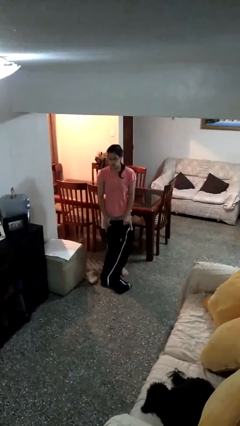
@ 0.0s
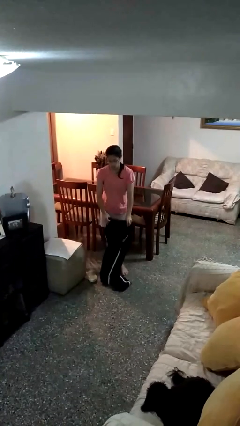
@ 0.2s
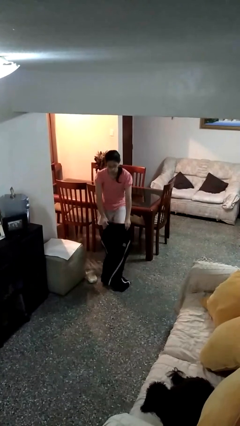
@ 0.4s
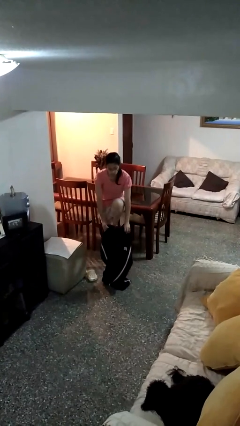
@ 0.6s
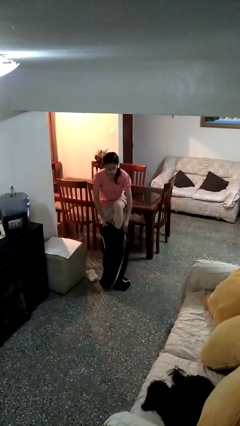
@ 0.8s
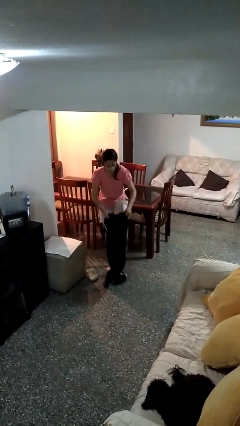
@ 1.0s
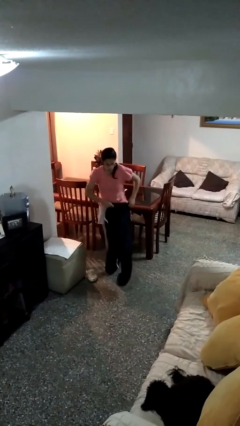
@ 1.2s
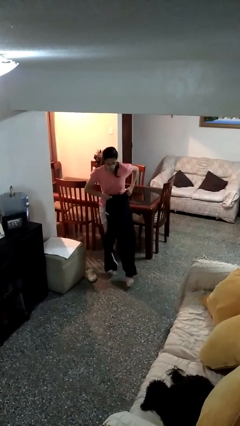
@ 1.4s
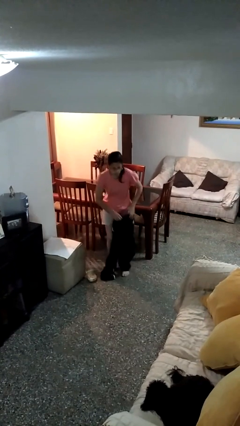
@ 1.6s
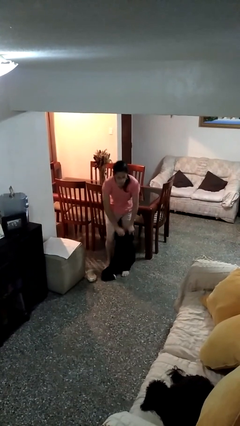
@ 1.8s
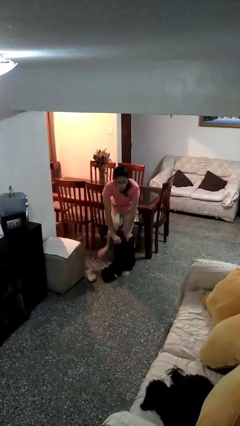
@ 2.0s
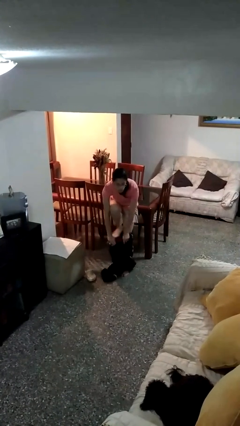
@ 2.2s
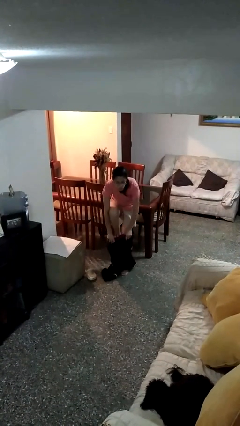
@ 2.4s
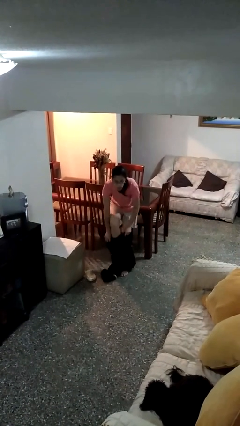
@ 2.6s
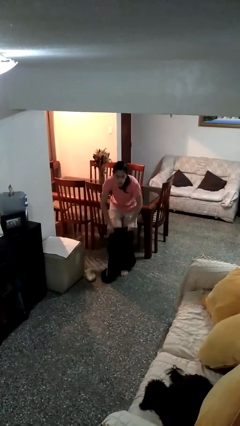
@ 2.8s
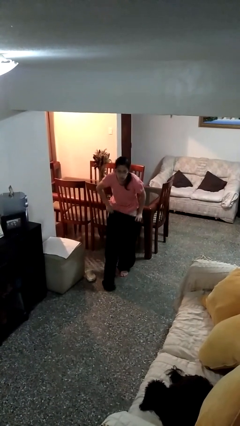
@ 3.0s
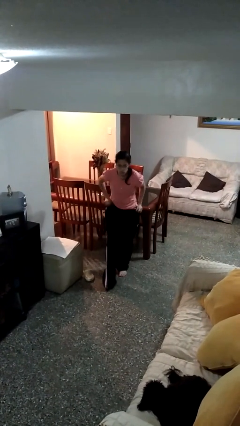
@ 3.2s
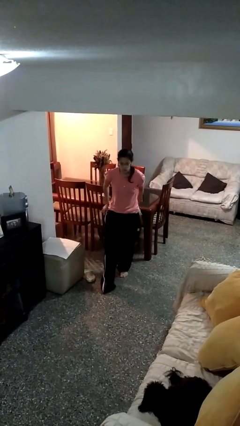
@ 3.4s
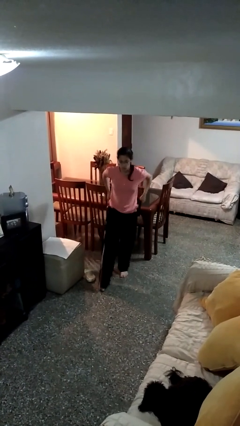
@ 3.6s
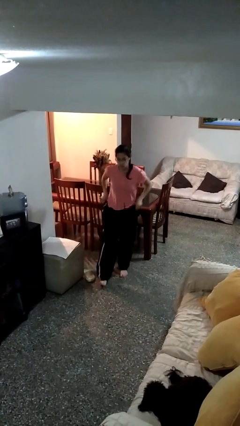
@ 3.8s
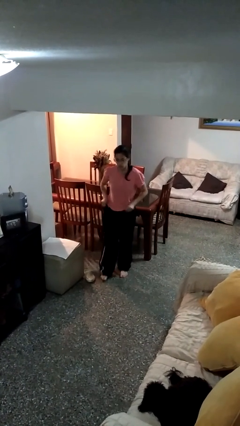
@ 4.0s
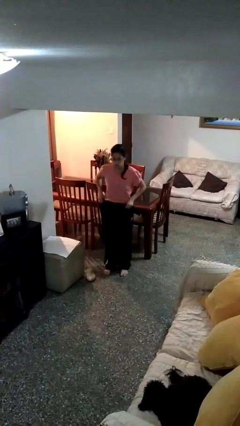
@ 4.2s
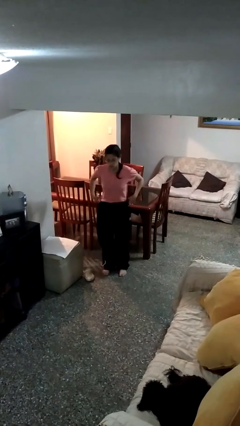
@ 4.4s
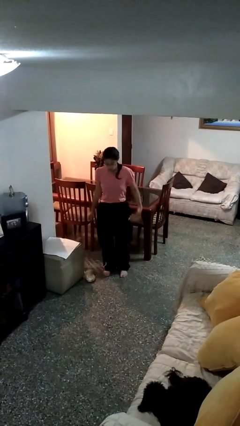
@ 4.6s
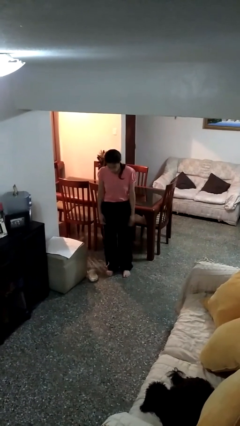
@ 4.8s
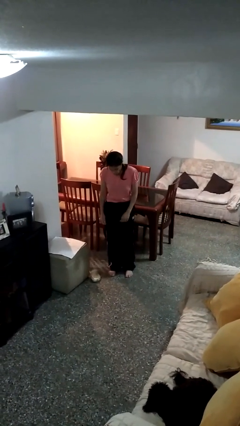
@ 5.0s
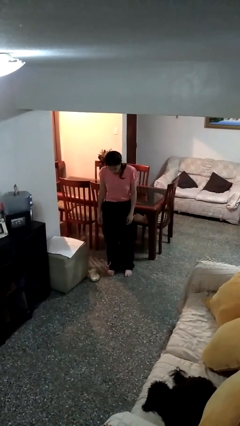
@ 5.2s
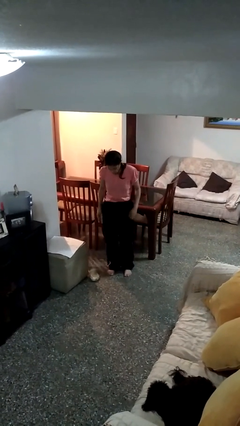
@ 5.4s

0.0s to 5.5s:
person takes off pants

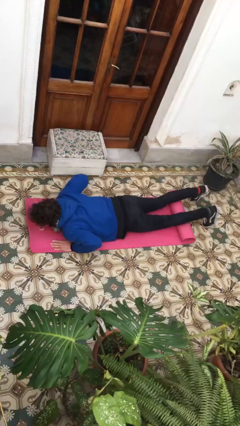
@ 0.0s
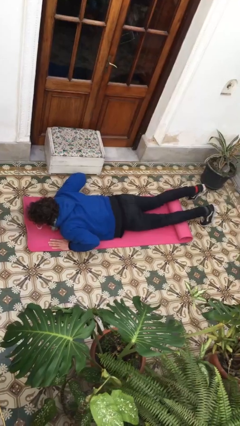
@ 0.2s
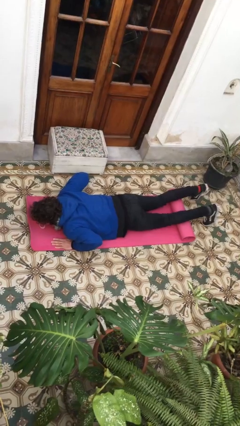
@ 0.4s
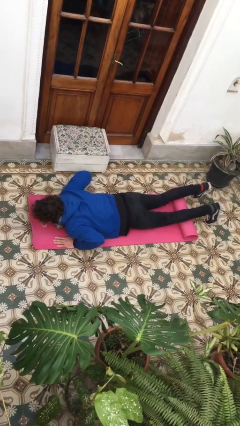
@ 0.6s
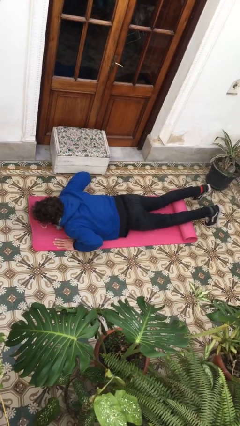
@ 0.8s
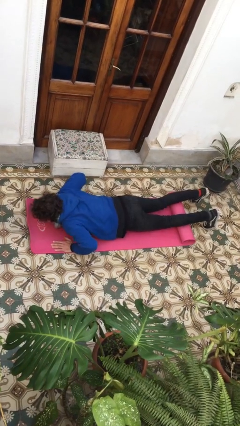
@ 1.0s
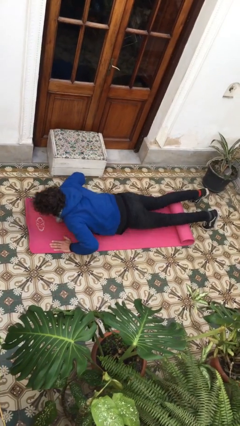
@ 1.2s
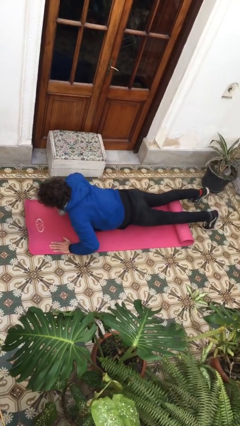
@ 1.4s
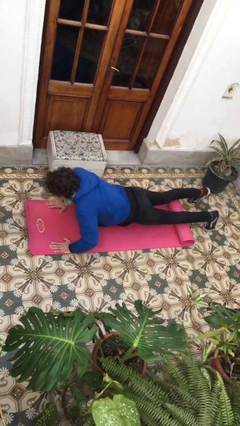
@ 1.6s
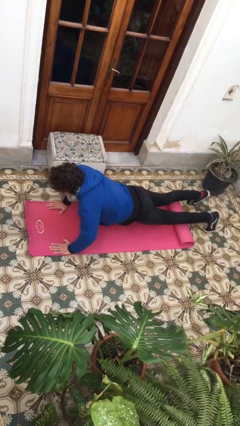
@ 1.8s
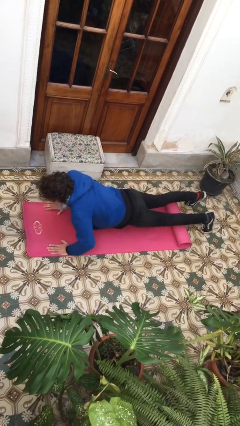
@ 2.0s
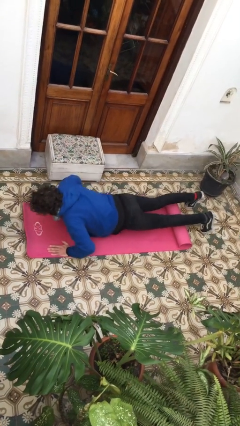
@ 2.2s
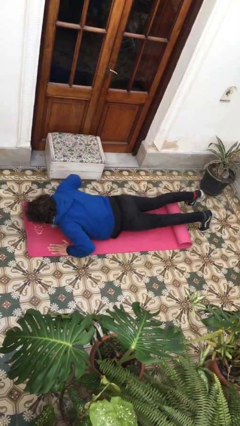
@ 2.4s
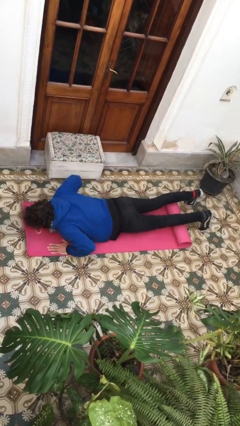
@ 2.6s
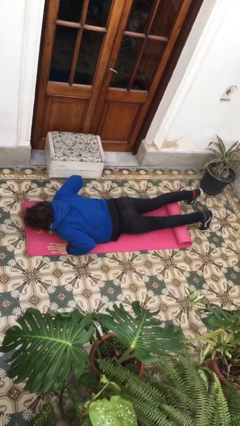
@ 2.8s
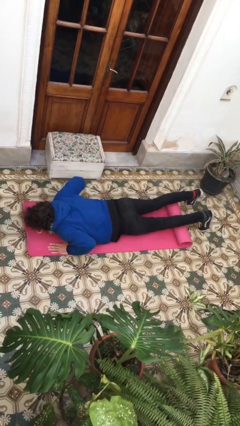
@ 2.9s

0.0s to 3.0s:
person exercises with pushup

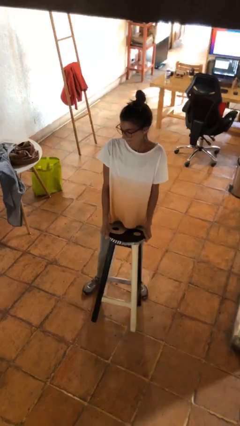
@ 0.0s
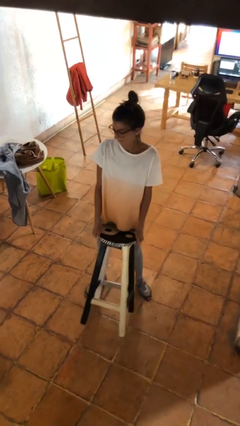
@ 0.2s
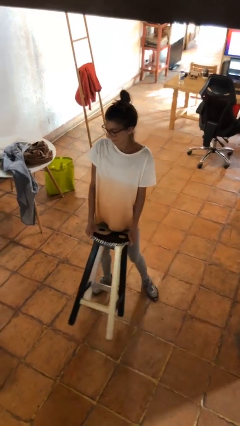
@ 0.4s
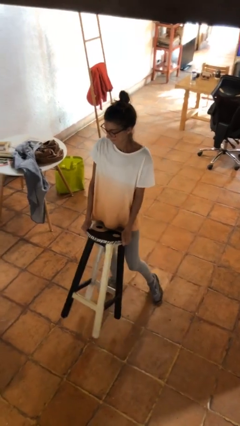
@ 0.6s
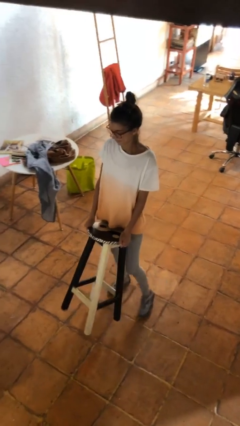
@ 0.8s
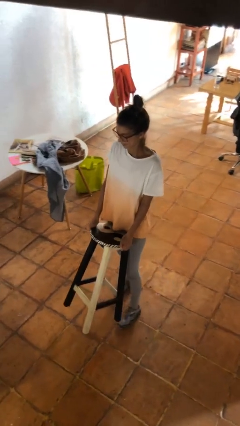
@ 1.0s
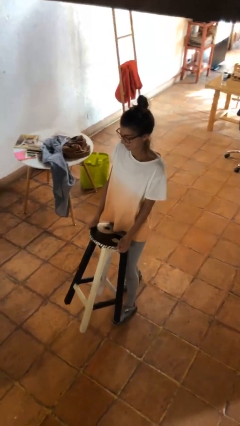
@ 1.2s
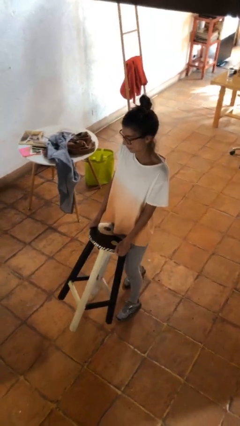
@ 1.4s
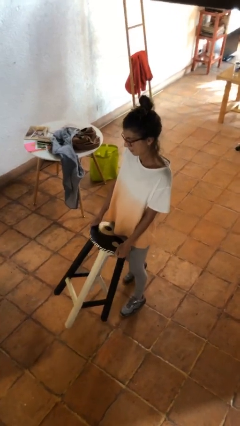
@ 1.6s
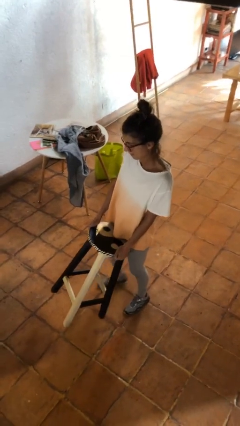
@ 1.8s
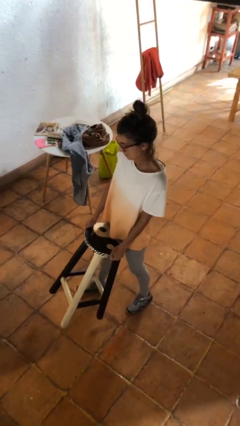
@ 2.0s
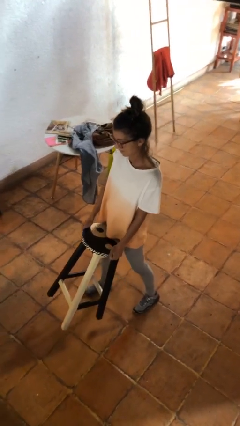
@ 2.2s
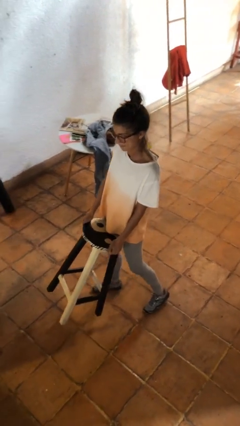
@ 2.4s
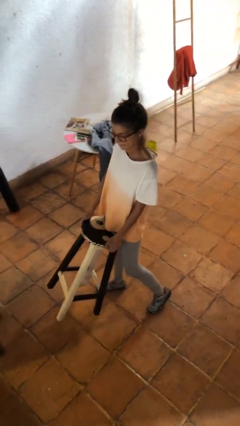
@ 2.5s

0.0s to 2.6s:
person carries furniture

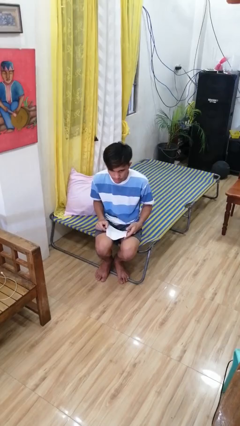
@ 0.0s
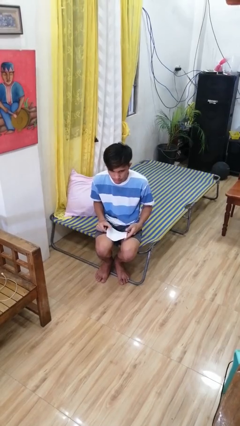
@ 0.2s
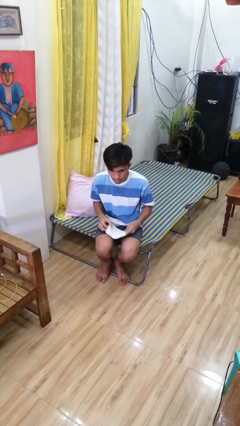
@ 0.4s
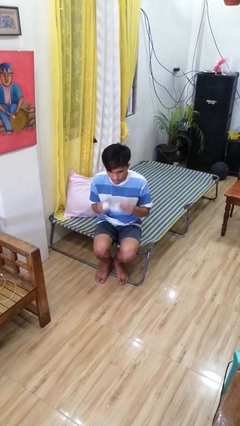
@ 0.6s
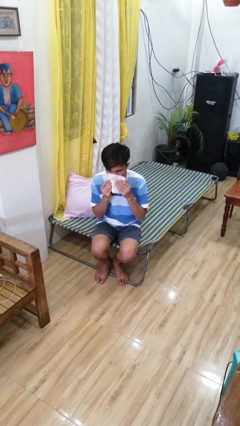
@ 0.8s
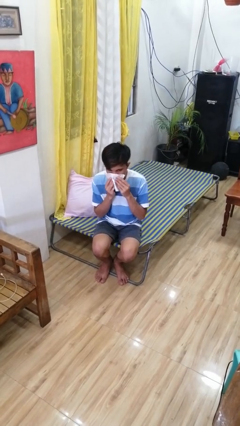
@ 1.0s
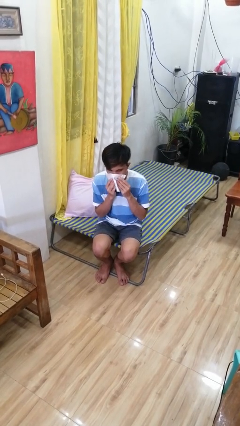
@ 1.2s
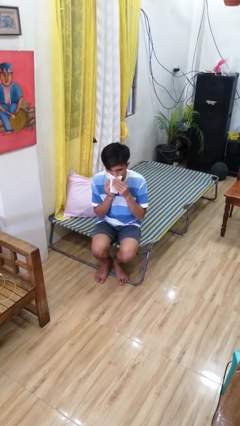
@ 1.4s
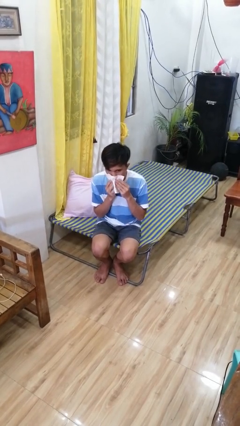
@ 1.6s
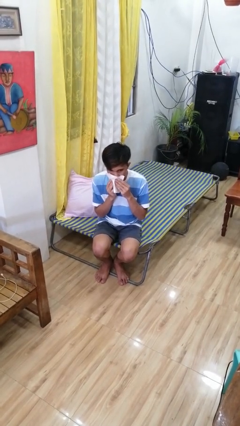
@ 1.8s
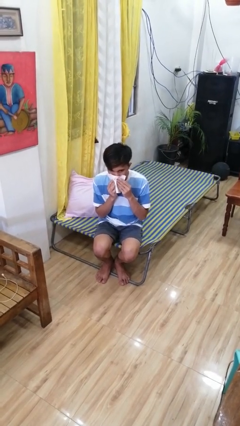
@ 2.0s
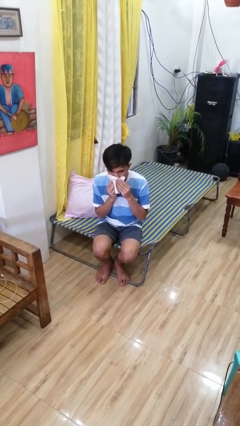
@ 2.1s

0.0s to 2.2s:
person wipes mouth with napkin

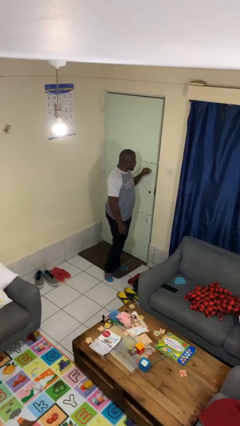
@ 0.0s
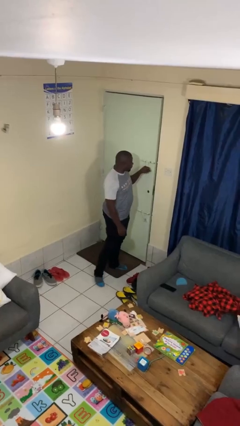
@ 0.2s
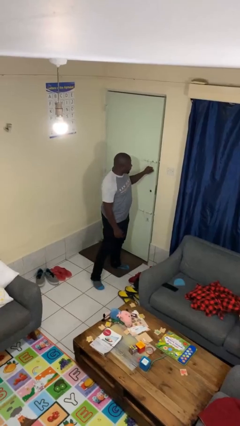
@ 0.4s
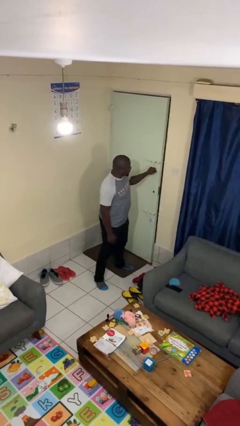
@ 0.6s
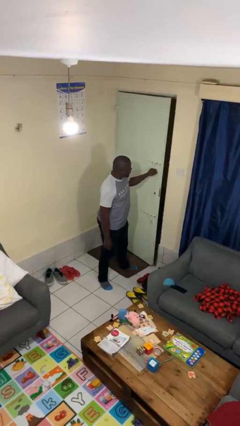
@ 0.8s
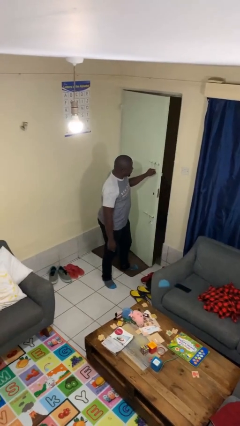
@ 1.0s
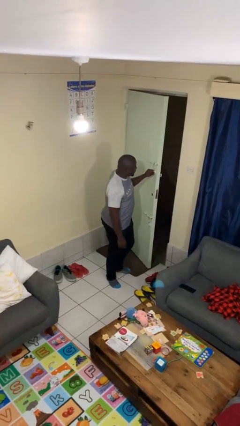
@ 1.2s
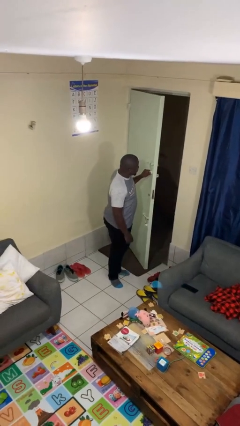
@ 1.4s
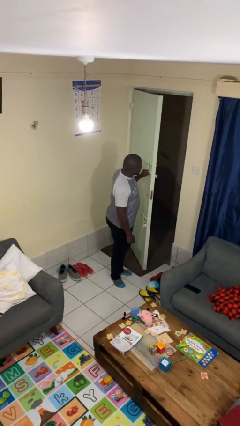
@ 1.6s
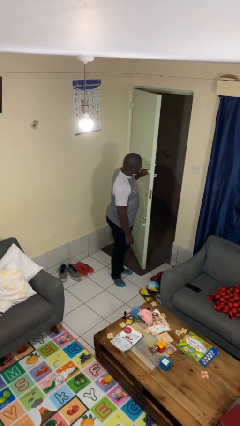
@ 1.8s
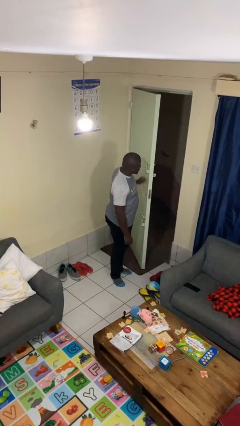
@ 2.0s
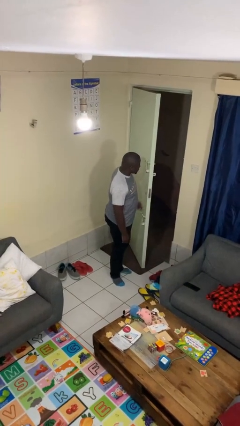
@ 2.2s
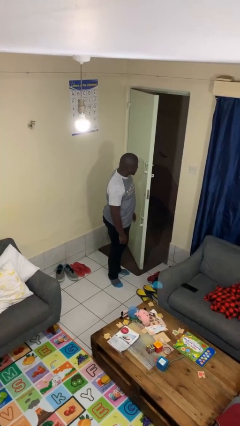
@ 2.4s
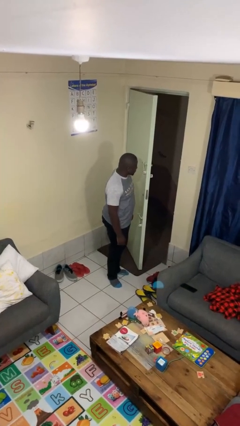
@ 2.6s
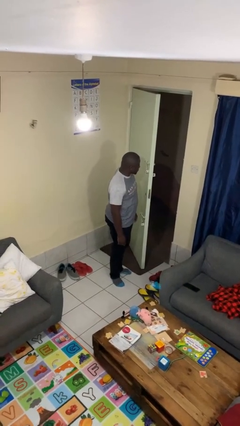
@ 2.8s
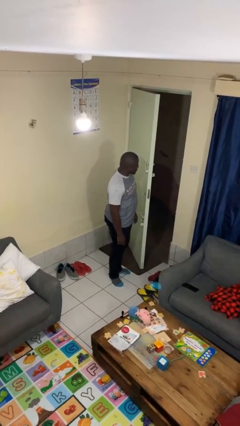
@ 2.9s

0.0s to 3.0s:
person opens facility door

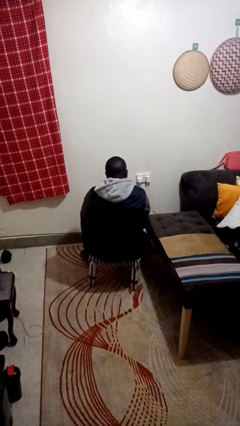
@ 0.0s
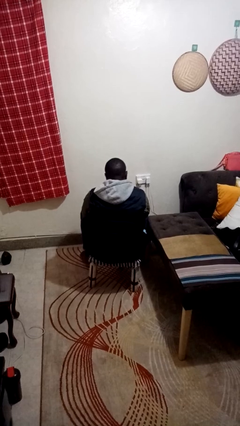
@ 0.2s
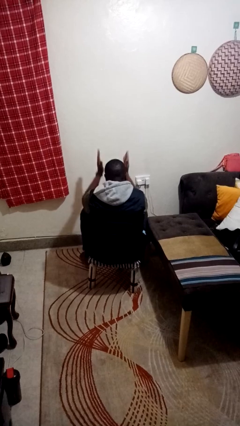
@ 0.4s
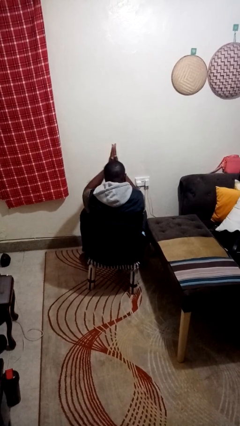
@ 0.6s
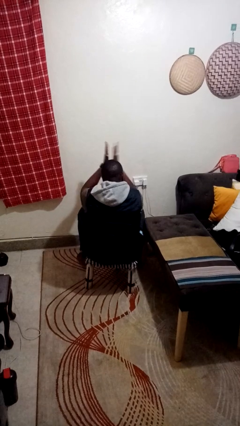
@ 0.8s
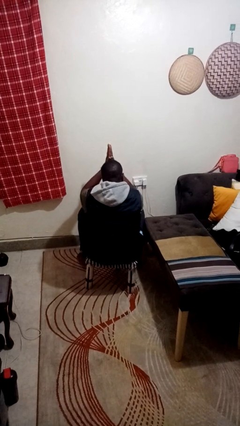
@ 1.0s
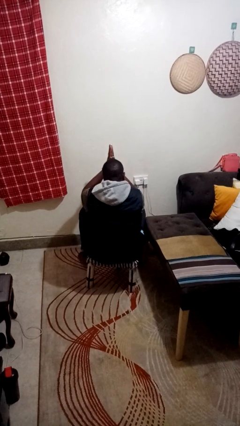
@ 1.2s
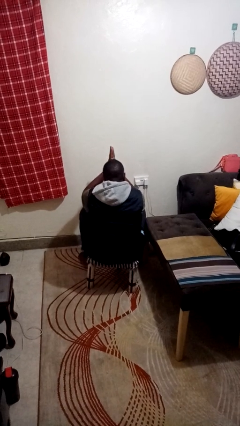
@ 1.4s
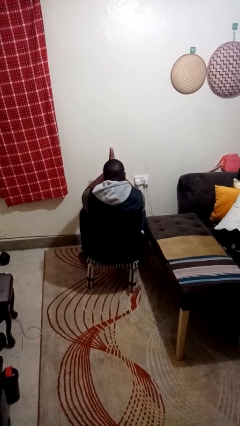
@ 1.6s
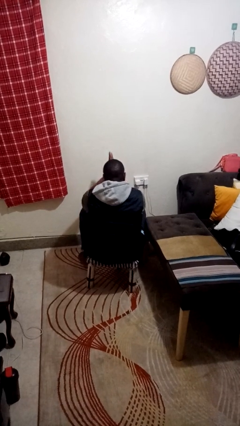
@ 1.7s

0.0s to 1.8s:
person claps hands
